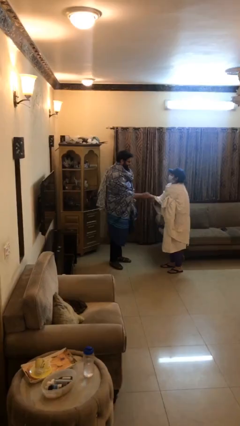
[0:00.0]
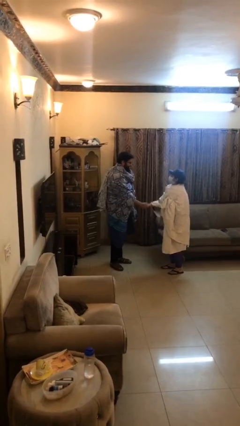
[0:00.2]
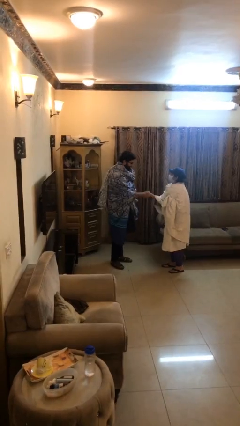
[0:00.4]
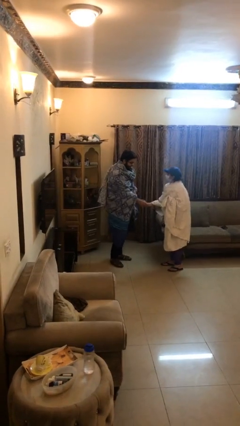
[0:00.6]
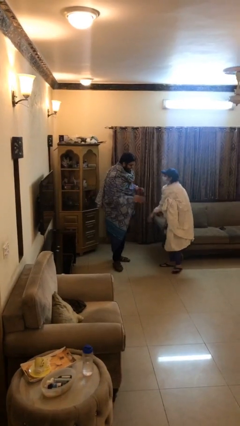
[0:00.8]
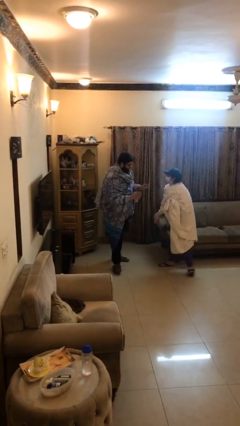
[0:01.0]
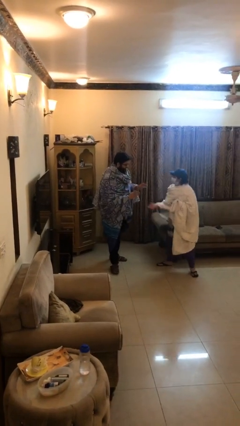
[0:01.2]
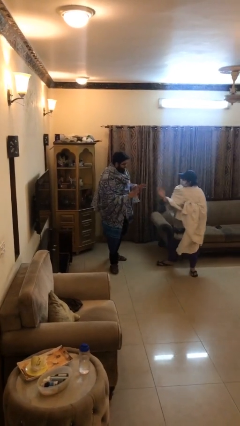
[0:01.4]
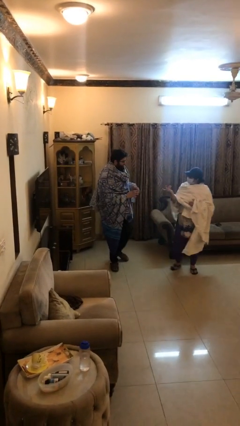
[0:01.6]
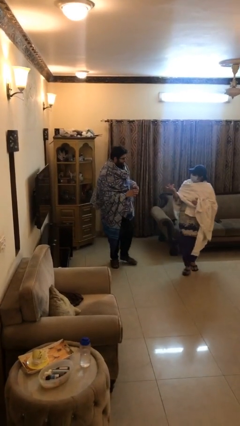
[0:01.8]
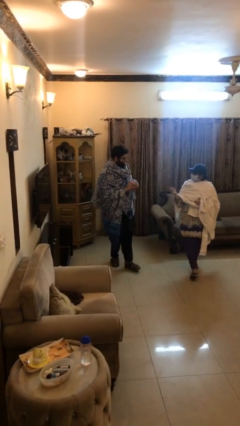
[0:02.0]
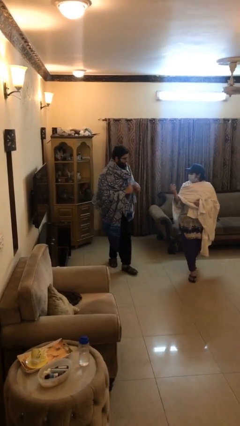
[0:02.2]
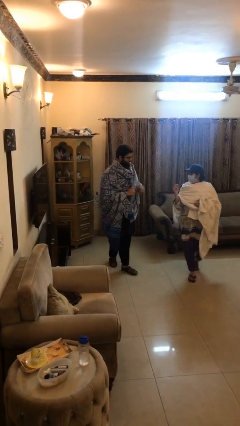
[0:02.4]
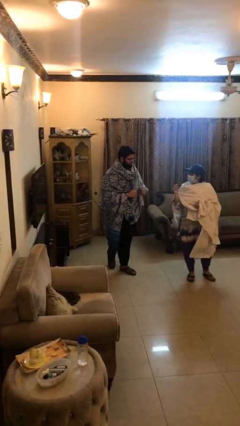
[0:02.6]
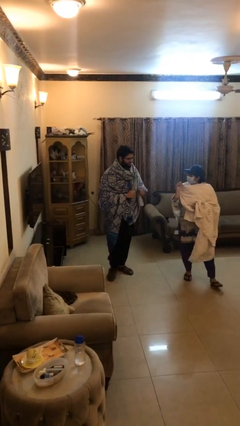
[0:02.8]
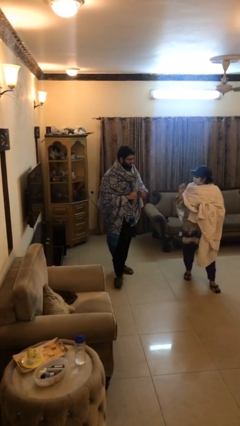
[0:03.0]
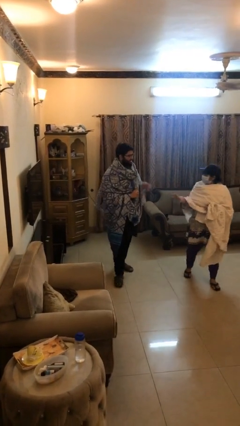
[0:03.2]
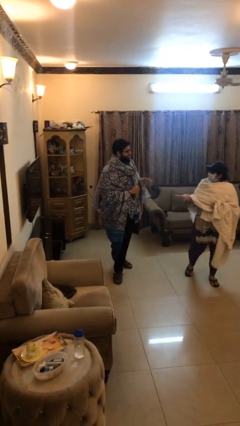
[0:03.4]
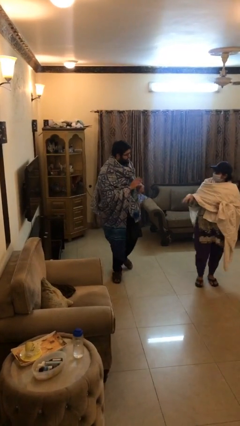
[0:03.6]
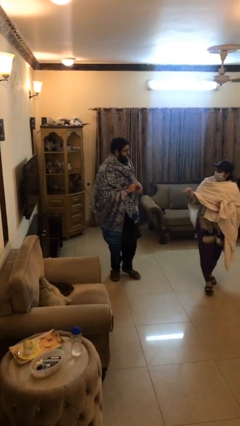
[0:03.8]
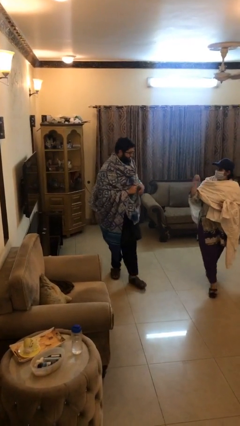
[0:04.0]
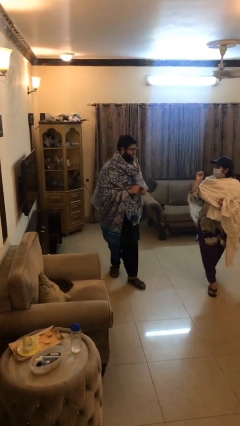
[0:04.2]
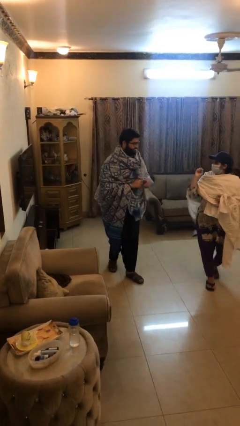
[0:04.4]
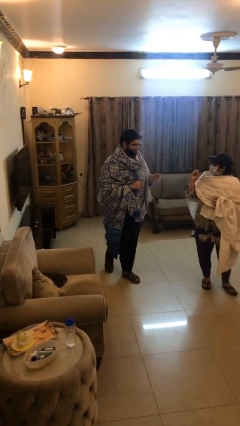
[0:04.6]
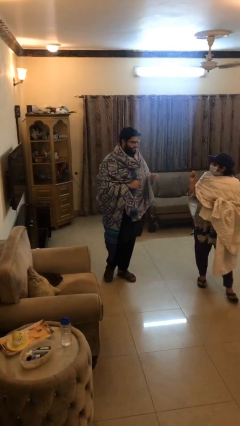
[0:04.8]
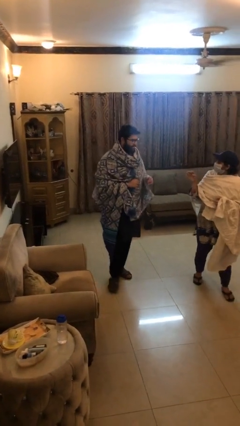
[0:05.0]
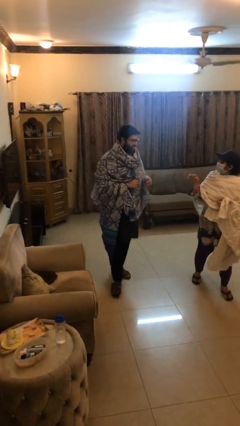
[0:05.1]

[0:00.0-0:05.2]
person talks to person

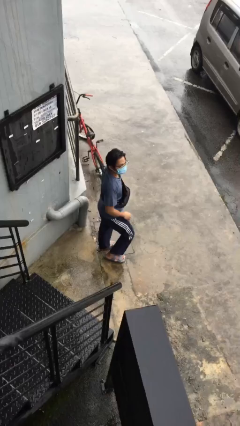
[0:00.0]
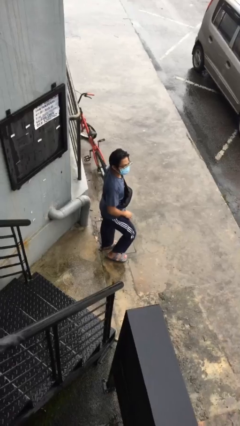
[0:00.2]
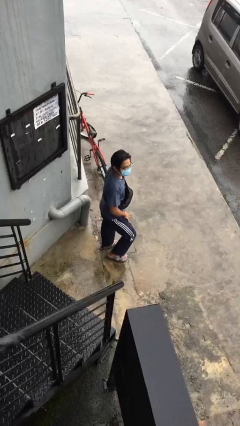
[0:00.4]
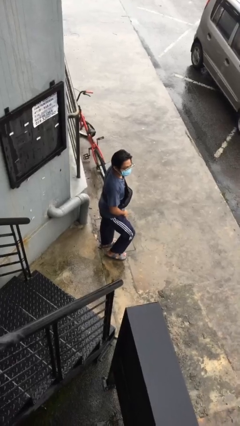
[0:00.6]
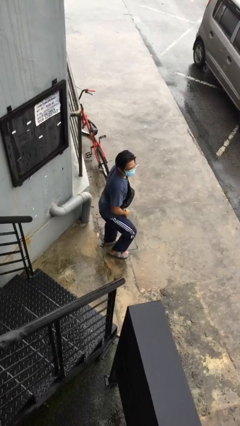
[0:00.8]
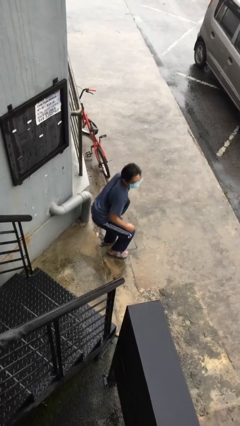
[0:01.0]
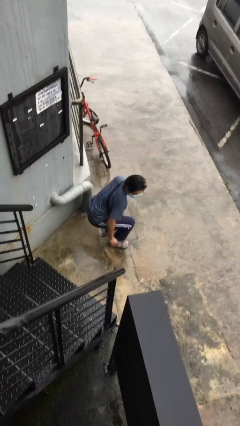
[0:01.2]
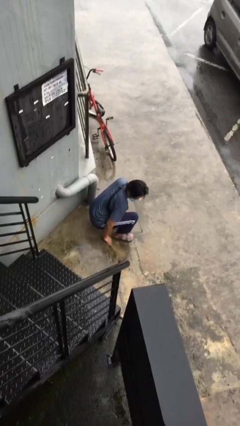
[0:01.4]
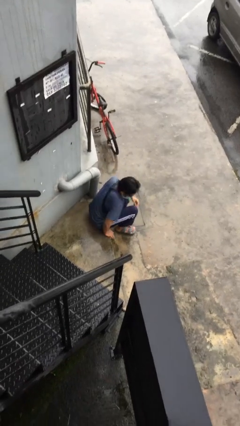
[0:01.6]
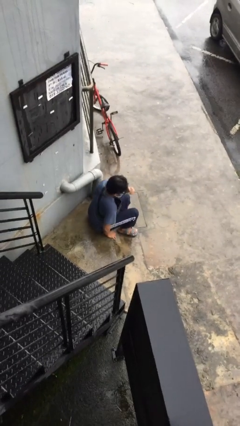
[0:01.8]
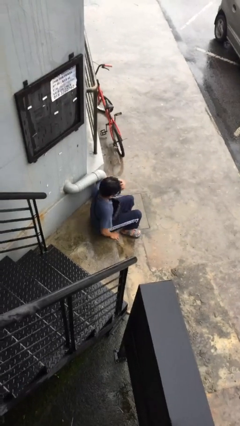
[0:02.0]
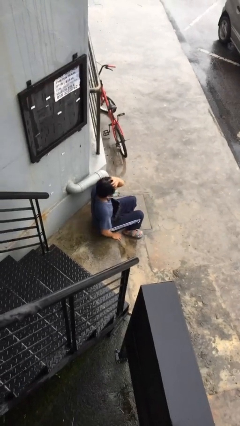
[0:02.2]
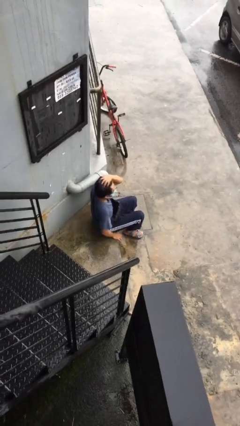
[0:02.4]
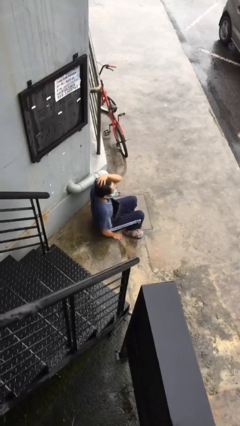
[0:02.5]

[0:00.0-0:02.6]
person sits down

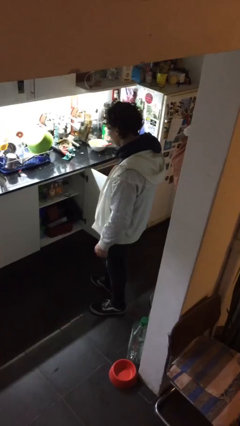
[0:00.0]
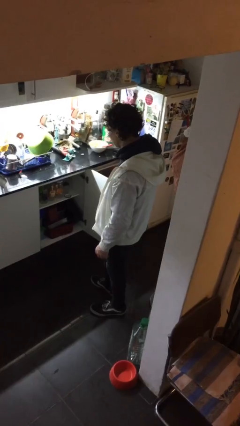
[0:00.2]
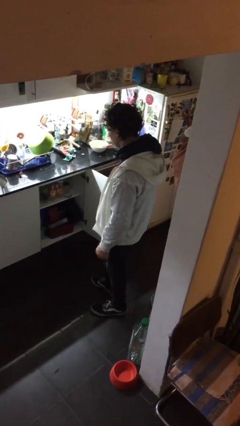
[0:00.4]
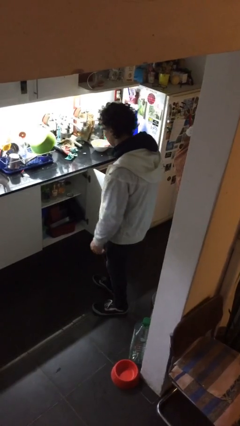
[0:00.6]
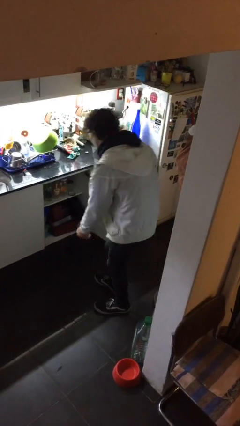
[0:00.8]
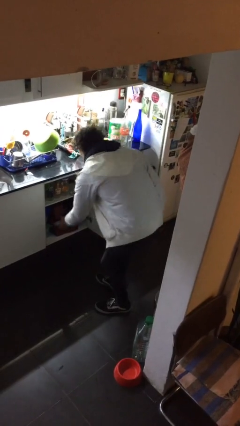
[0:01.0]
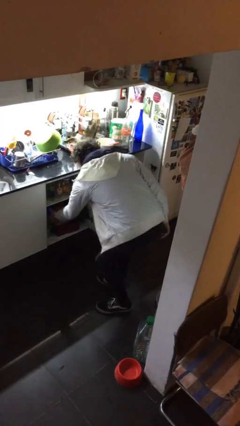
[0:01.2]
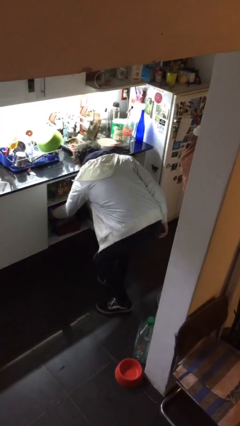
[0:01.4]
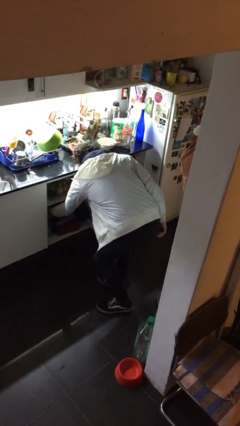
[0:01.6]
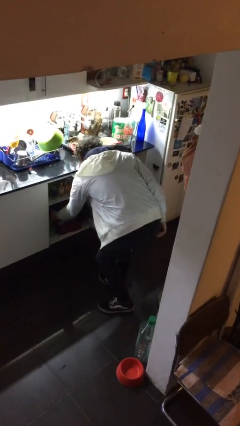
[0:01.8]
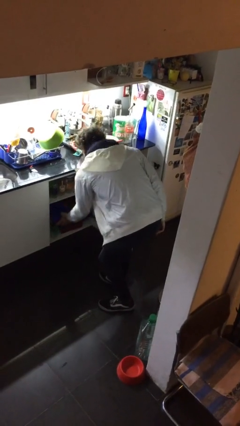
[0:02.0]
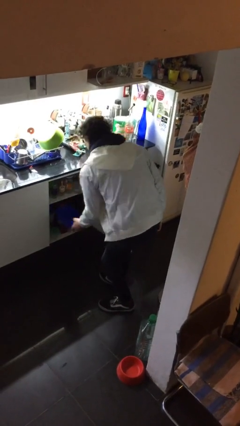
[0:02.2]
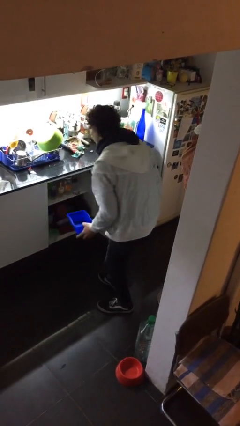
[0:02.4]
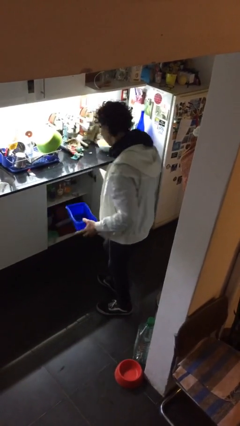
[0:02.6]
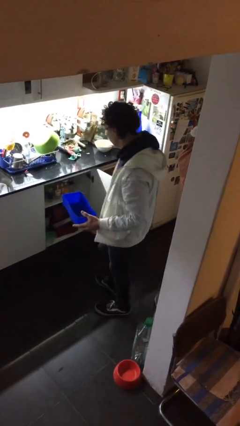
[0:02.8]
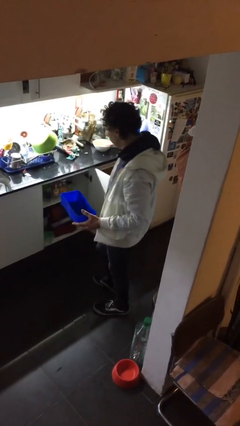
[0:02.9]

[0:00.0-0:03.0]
person picks up object from cabinet

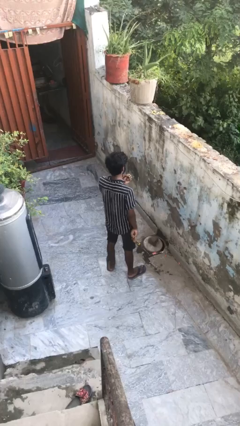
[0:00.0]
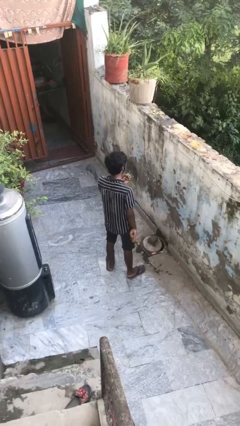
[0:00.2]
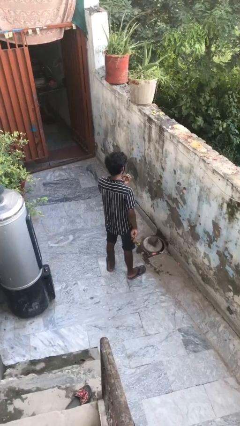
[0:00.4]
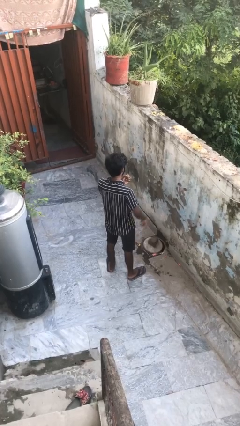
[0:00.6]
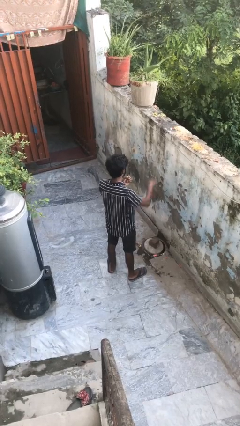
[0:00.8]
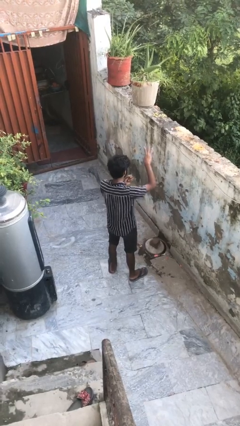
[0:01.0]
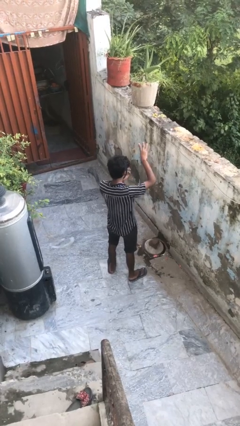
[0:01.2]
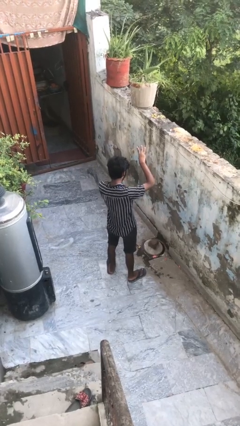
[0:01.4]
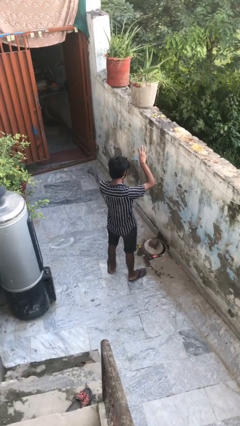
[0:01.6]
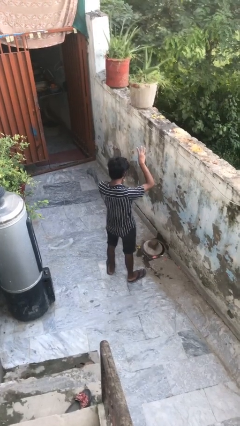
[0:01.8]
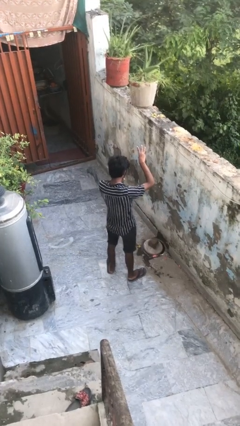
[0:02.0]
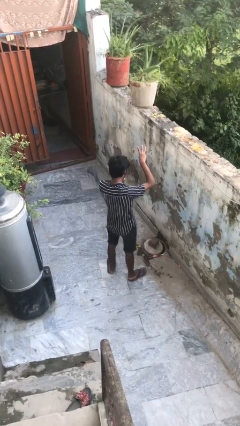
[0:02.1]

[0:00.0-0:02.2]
person gestures number three

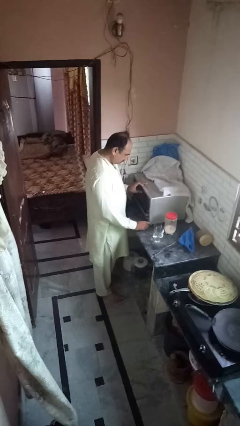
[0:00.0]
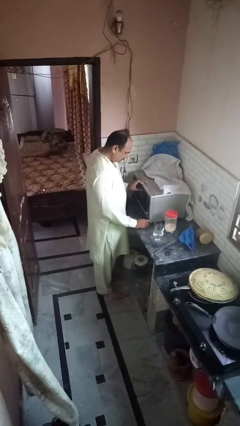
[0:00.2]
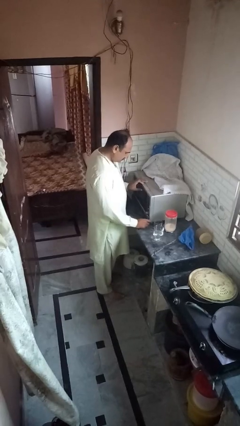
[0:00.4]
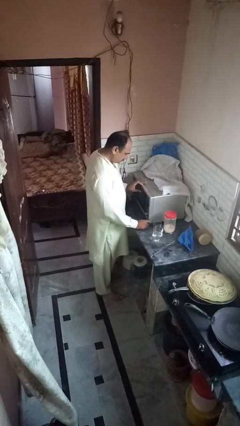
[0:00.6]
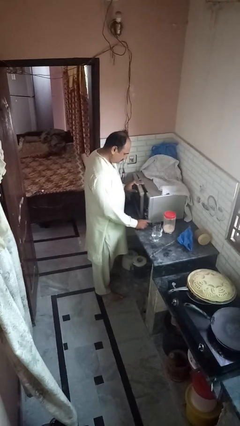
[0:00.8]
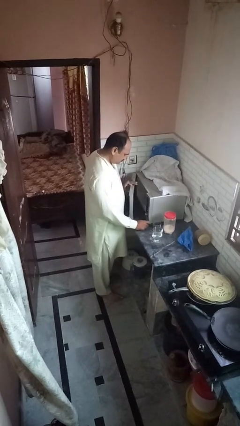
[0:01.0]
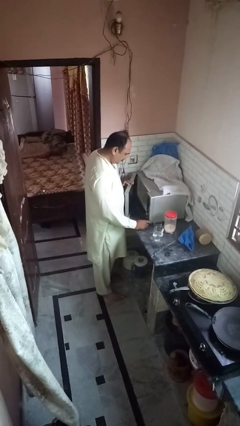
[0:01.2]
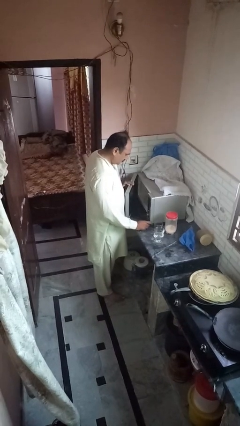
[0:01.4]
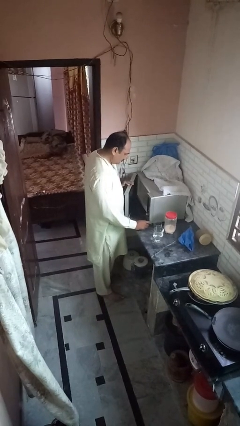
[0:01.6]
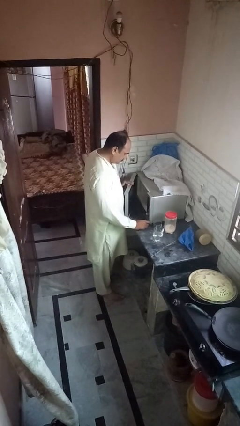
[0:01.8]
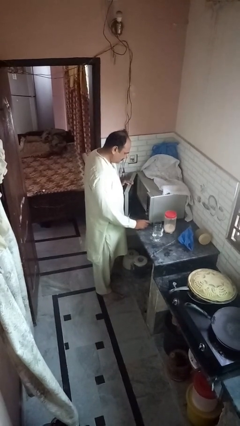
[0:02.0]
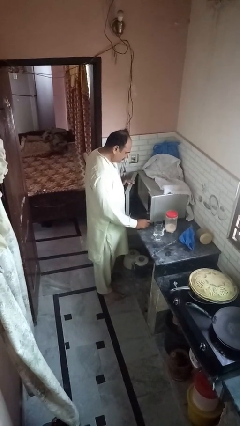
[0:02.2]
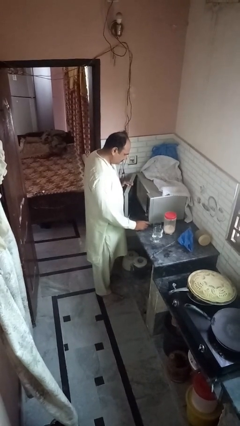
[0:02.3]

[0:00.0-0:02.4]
person opens microwave

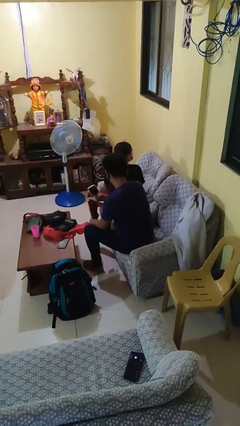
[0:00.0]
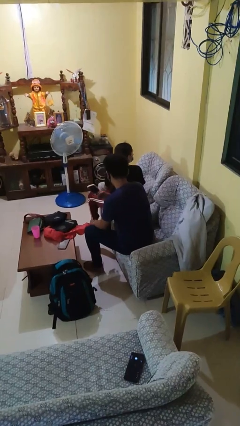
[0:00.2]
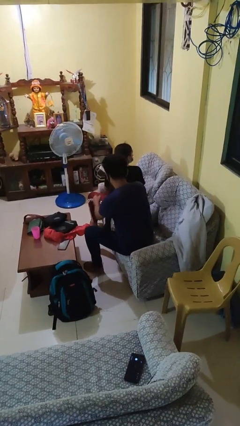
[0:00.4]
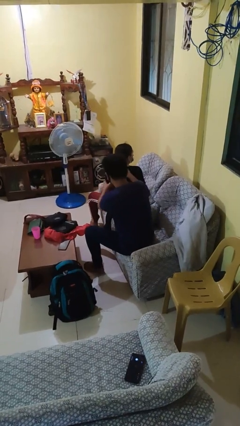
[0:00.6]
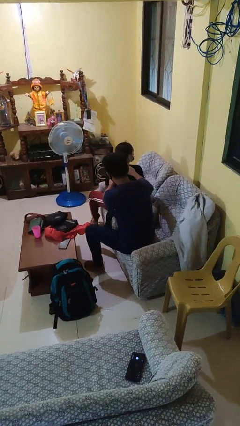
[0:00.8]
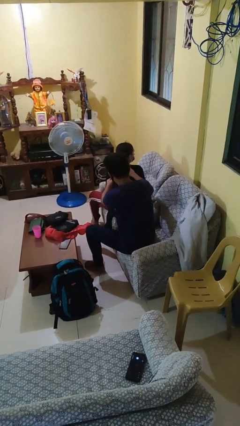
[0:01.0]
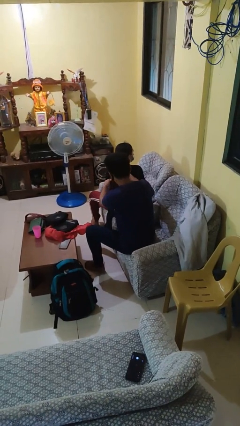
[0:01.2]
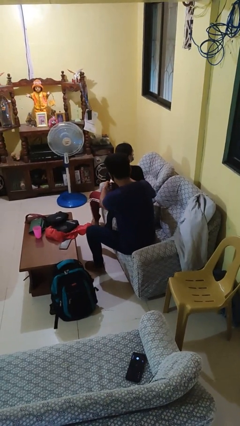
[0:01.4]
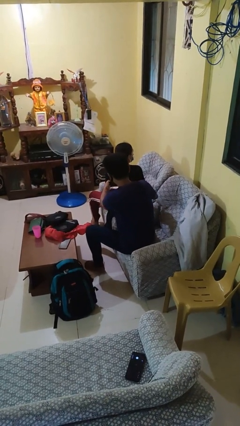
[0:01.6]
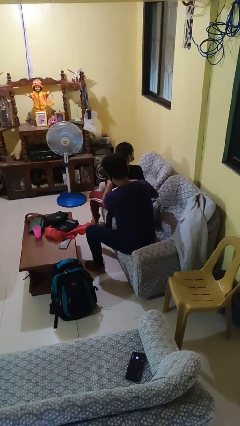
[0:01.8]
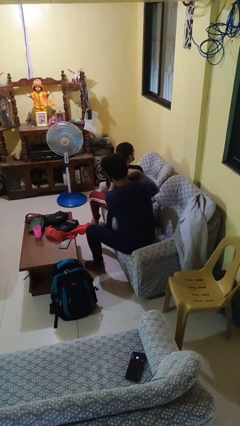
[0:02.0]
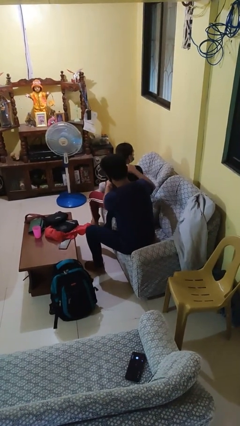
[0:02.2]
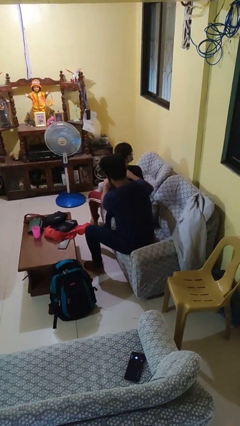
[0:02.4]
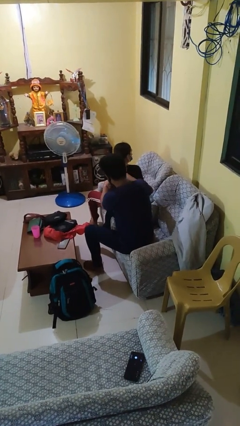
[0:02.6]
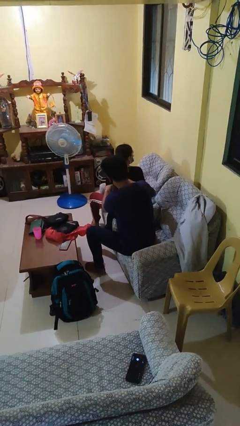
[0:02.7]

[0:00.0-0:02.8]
person brushes hair of person
